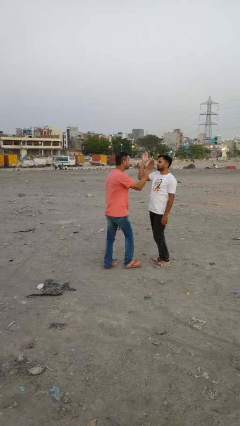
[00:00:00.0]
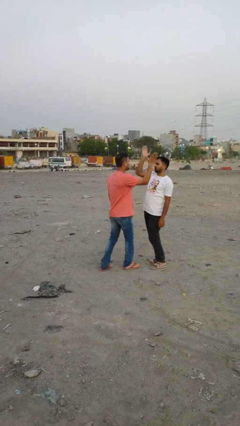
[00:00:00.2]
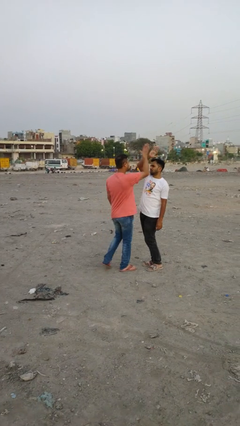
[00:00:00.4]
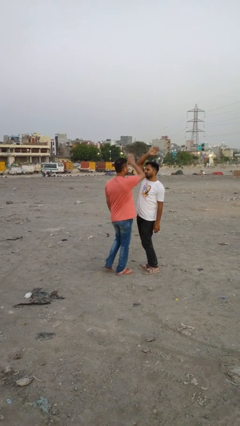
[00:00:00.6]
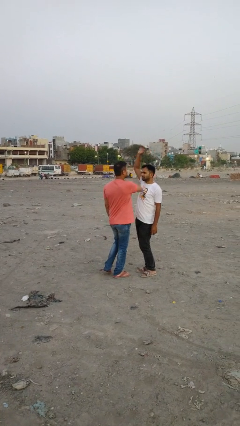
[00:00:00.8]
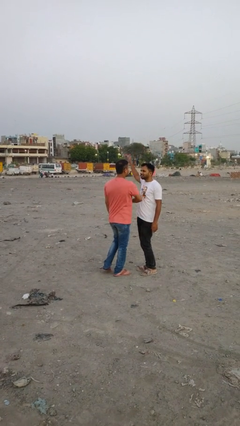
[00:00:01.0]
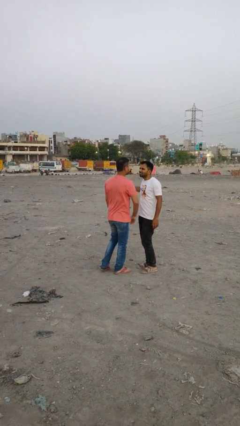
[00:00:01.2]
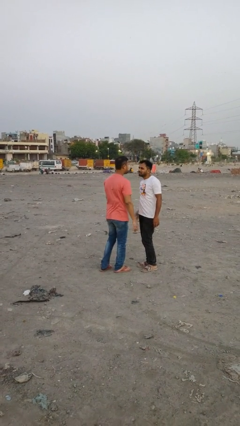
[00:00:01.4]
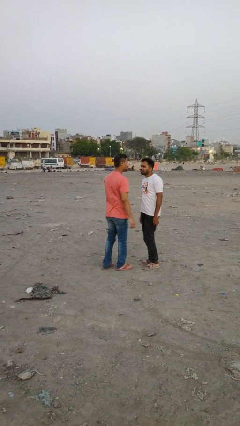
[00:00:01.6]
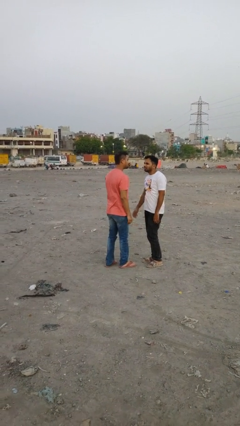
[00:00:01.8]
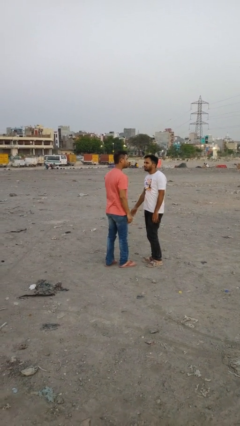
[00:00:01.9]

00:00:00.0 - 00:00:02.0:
person highfives hand

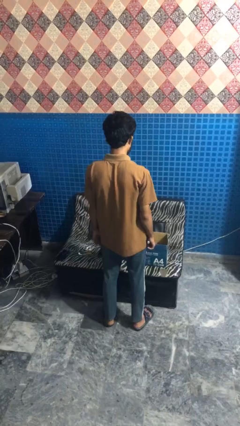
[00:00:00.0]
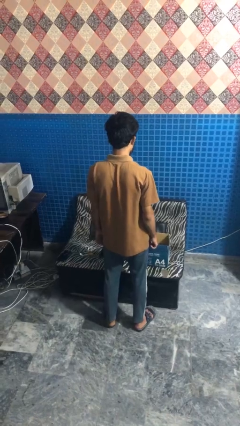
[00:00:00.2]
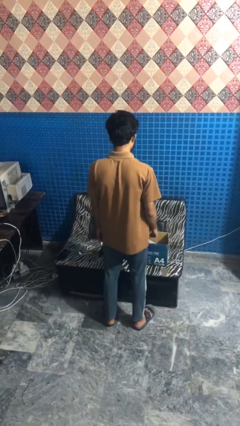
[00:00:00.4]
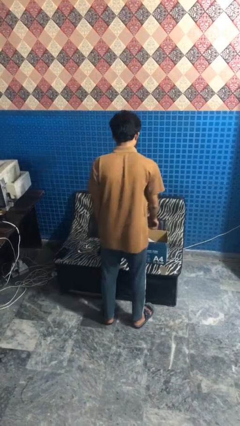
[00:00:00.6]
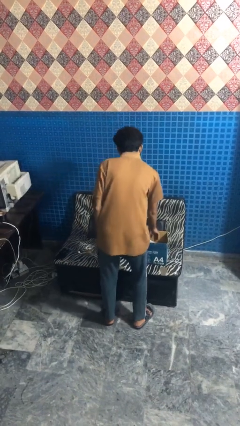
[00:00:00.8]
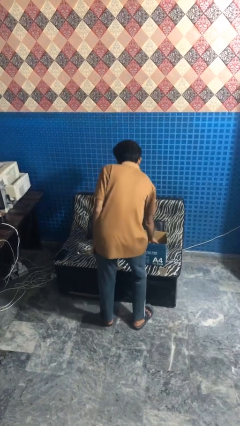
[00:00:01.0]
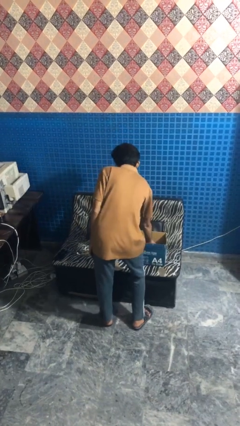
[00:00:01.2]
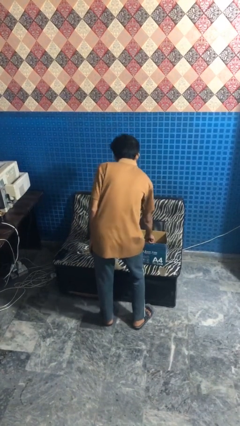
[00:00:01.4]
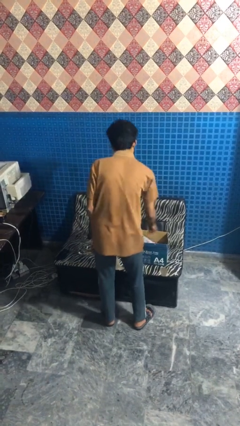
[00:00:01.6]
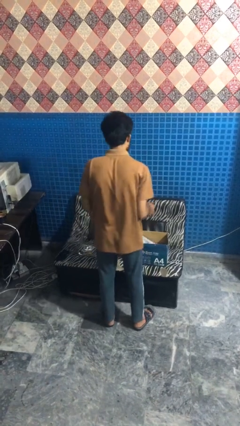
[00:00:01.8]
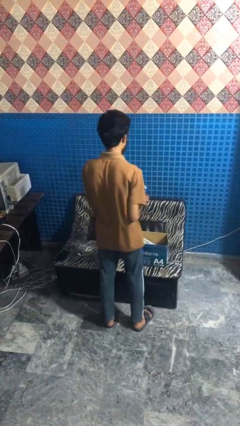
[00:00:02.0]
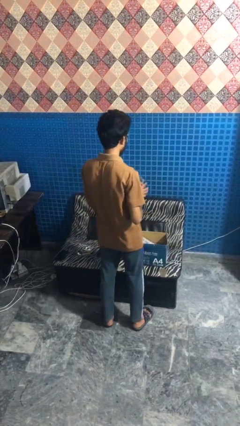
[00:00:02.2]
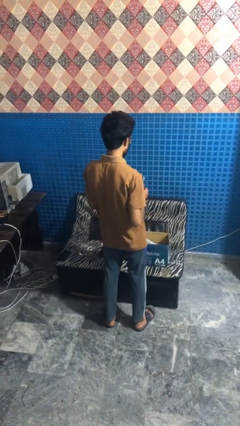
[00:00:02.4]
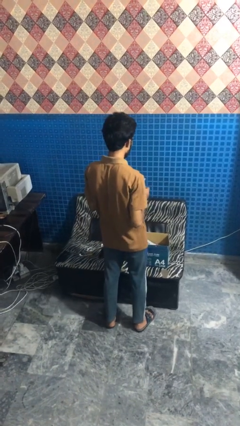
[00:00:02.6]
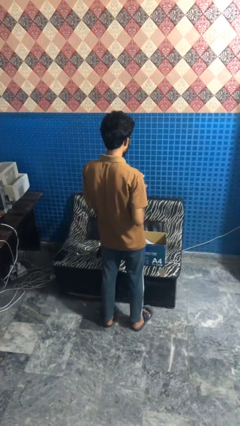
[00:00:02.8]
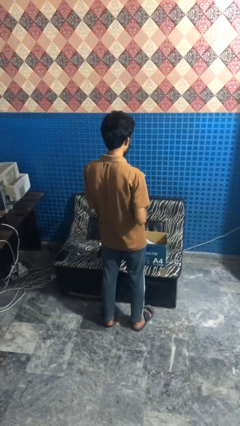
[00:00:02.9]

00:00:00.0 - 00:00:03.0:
person takes object from box

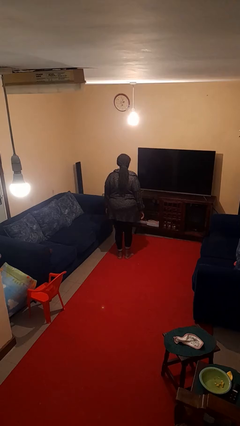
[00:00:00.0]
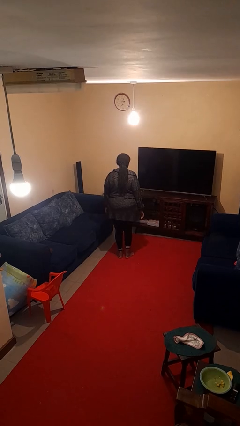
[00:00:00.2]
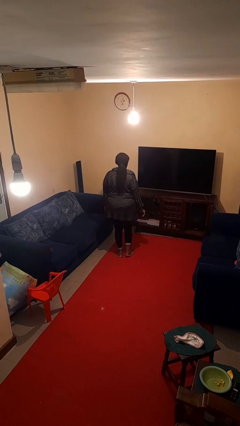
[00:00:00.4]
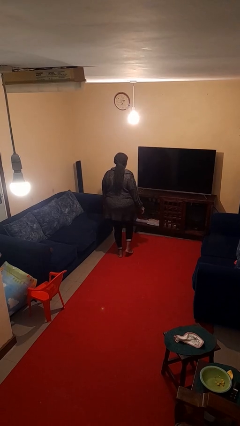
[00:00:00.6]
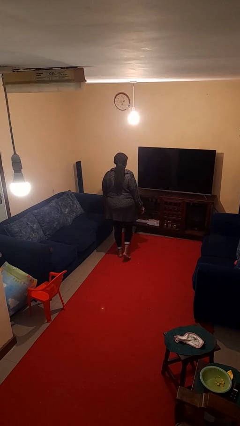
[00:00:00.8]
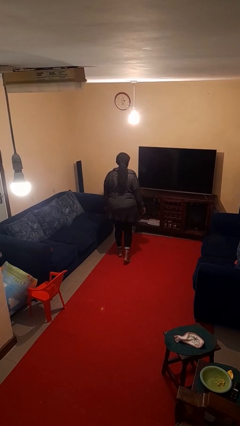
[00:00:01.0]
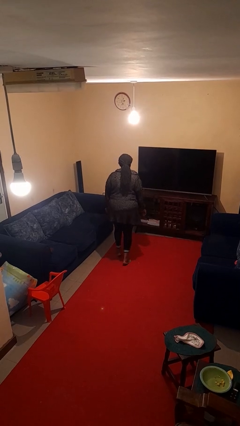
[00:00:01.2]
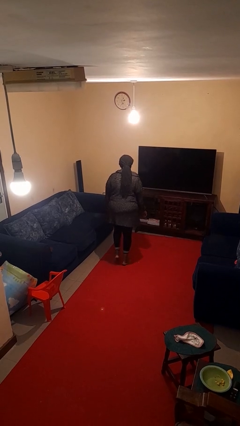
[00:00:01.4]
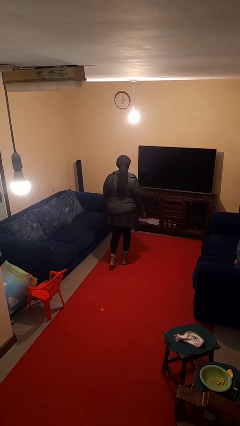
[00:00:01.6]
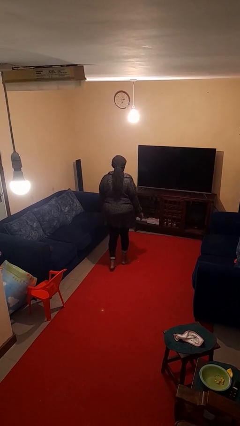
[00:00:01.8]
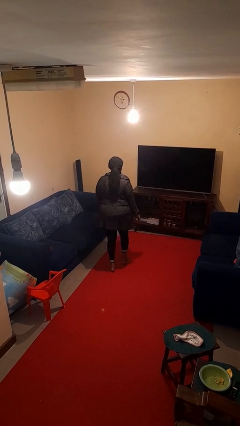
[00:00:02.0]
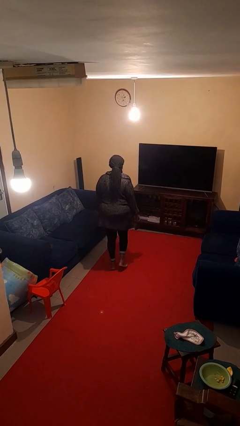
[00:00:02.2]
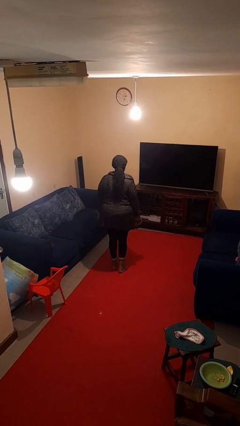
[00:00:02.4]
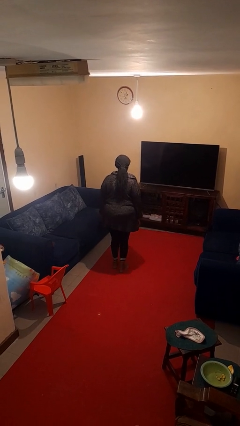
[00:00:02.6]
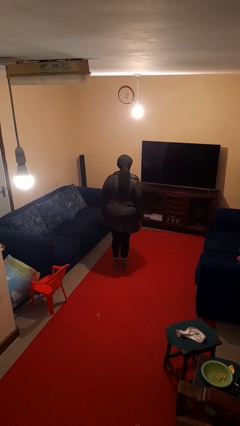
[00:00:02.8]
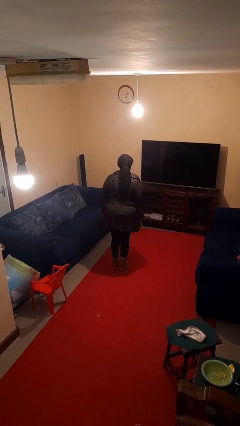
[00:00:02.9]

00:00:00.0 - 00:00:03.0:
person walks tiptoe

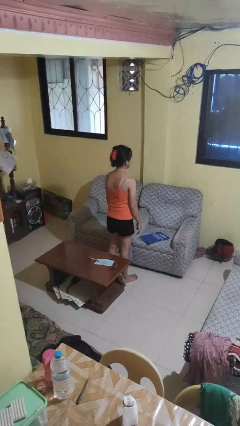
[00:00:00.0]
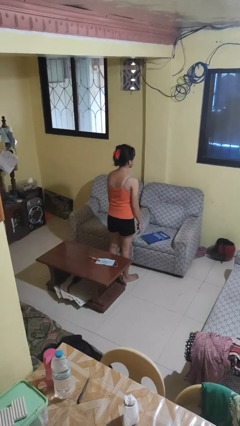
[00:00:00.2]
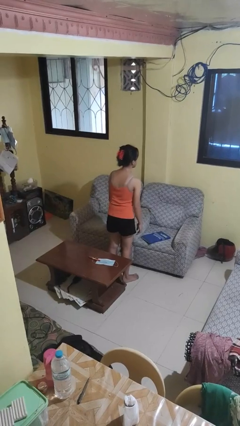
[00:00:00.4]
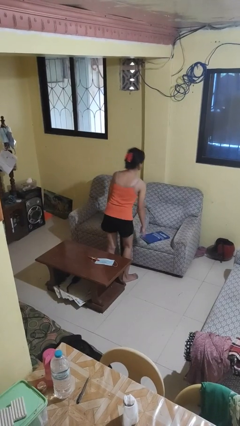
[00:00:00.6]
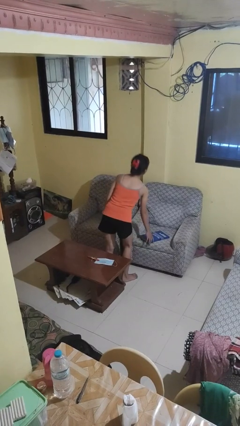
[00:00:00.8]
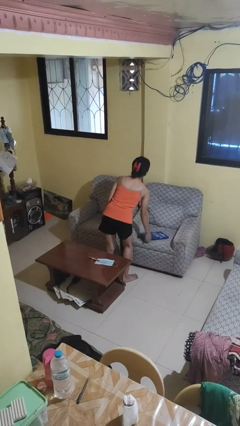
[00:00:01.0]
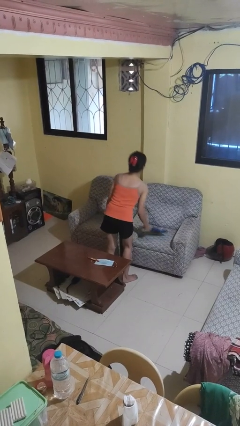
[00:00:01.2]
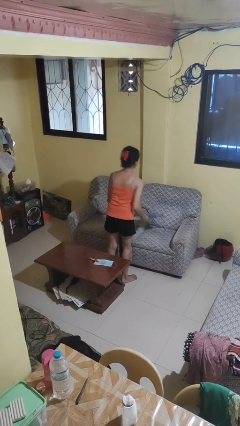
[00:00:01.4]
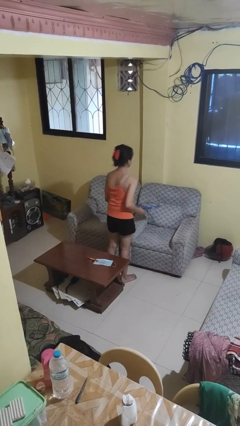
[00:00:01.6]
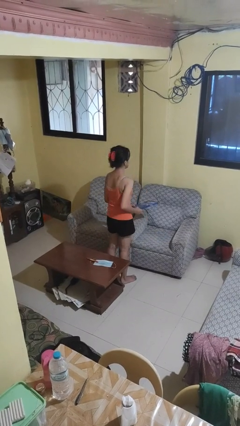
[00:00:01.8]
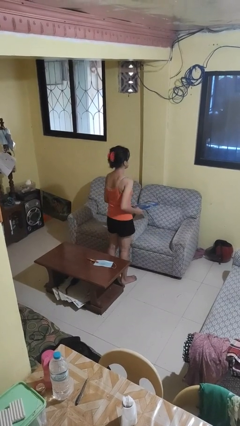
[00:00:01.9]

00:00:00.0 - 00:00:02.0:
person picks up object from couch

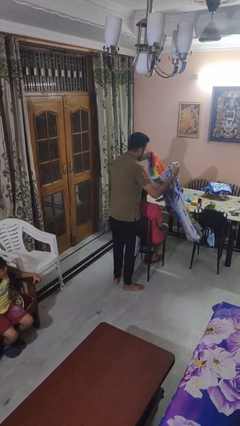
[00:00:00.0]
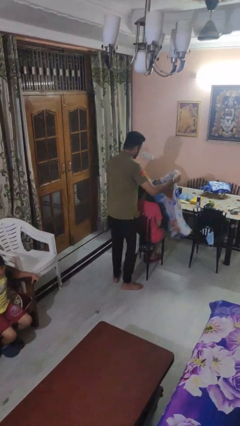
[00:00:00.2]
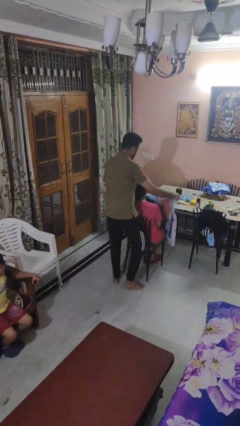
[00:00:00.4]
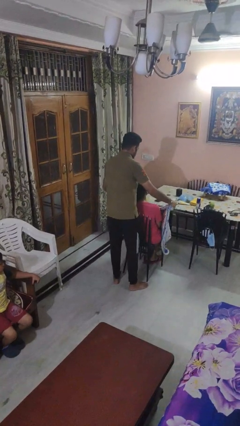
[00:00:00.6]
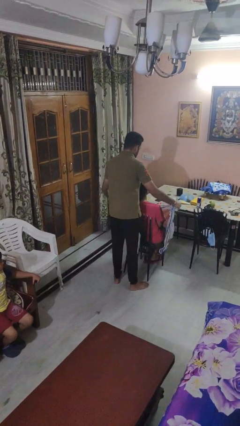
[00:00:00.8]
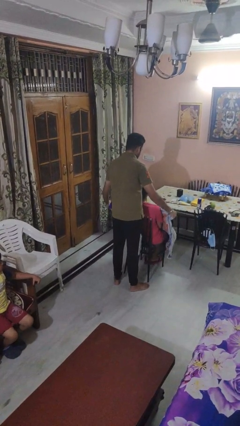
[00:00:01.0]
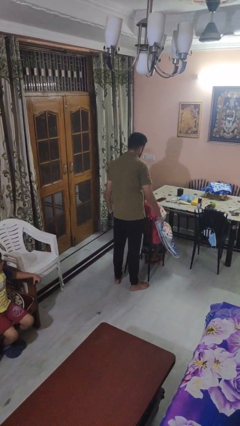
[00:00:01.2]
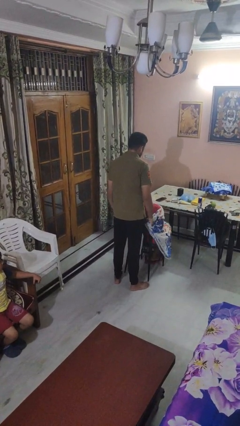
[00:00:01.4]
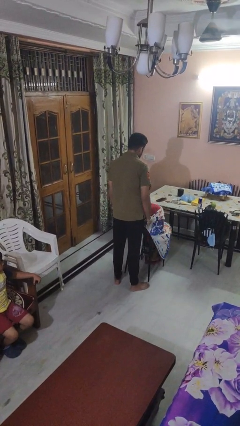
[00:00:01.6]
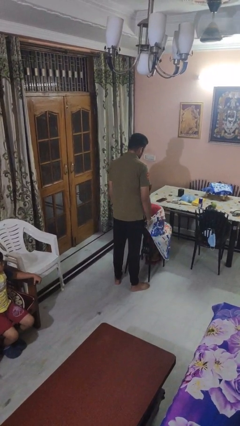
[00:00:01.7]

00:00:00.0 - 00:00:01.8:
person covers friend with blanket

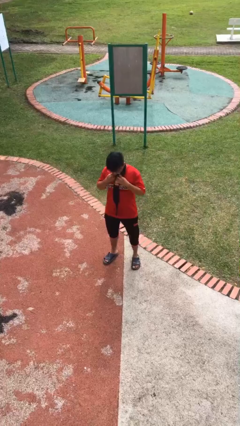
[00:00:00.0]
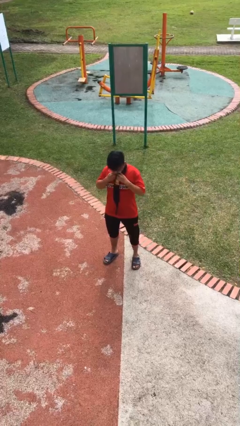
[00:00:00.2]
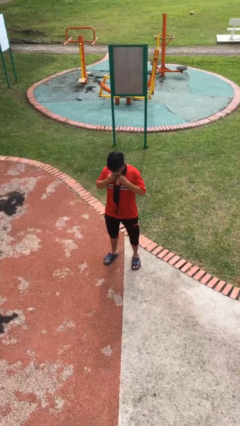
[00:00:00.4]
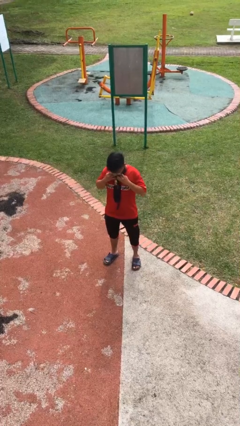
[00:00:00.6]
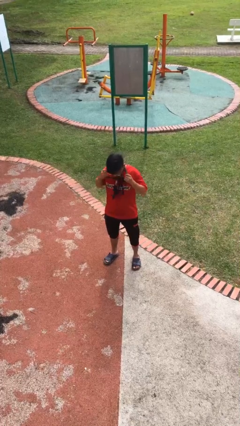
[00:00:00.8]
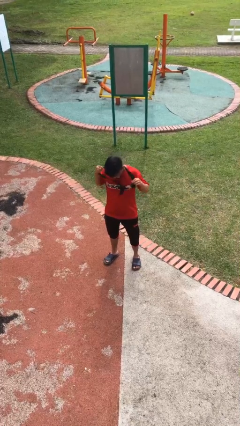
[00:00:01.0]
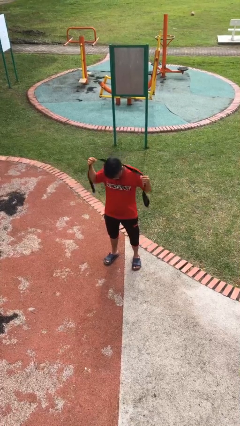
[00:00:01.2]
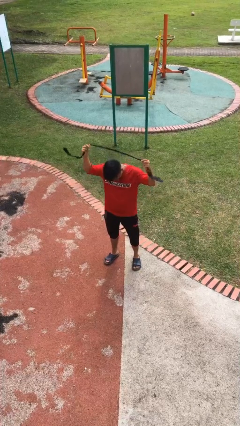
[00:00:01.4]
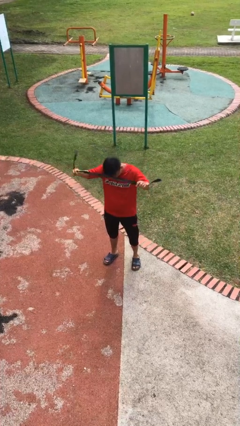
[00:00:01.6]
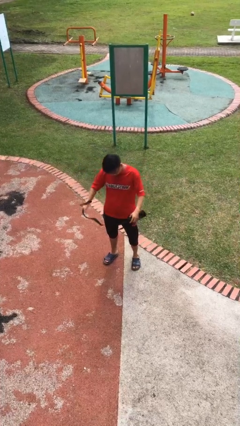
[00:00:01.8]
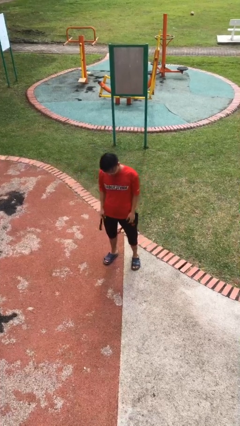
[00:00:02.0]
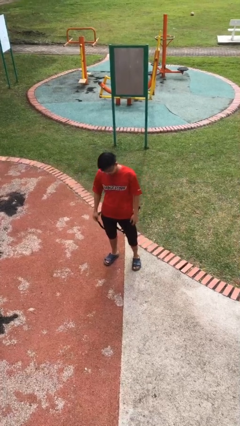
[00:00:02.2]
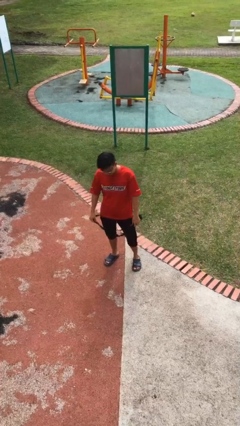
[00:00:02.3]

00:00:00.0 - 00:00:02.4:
person takes off necktie

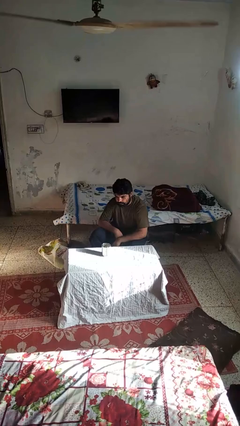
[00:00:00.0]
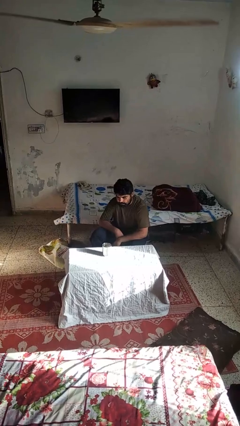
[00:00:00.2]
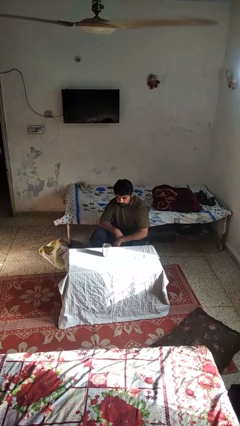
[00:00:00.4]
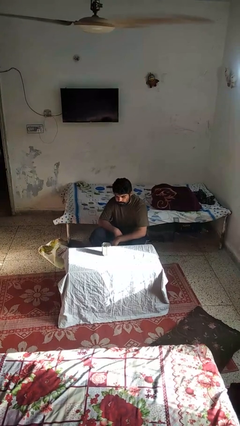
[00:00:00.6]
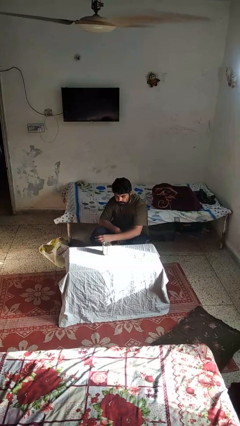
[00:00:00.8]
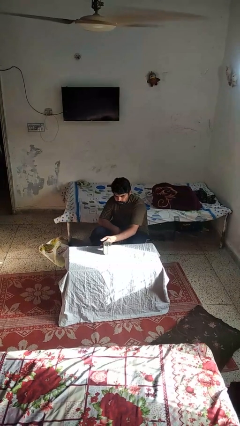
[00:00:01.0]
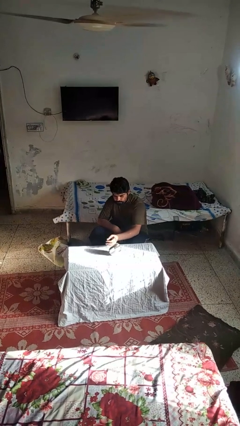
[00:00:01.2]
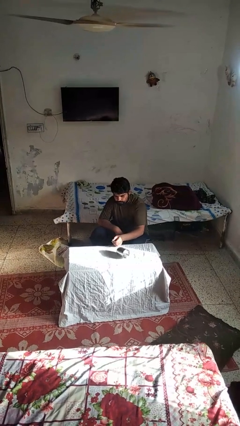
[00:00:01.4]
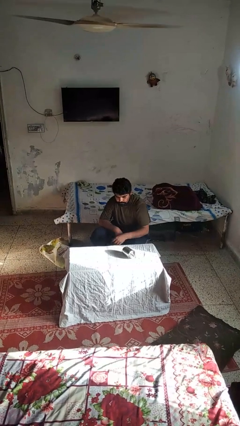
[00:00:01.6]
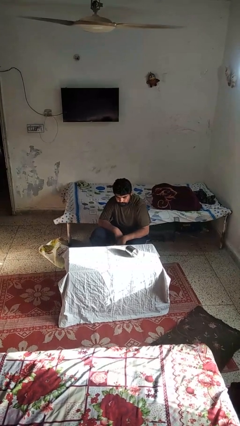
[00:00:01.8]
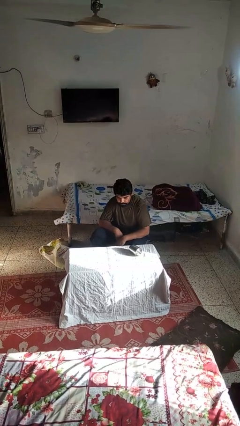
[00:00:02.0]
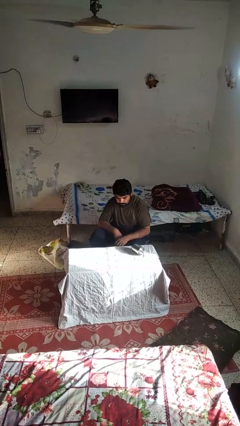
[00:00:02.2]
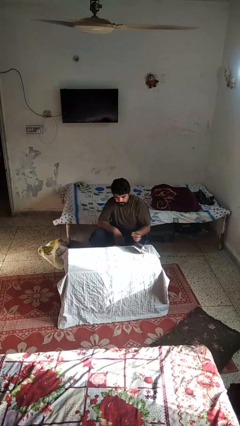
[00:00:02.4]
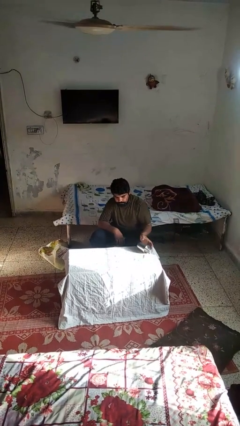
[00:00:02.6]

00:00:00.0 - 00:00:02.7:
person knocks over glass

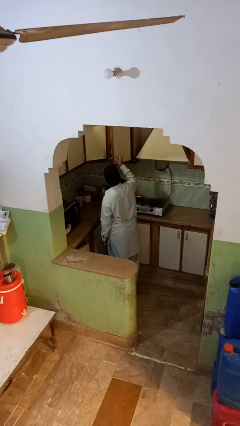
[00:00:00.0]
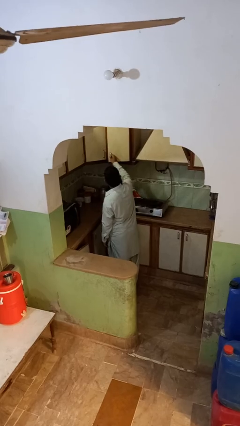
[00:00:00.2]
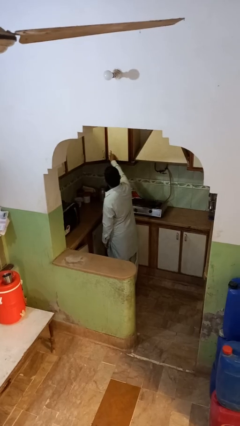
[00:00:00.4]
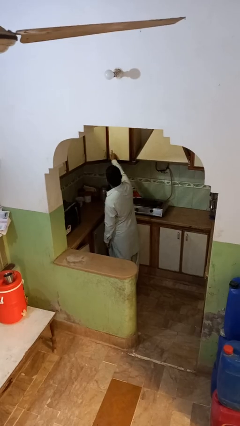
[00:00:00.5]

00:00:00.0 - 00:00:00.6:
person closes cabinet
